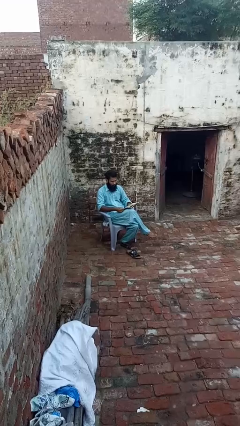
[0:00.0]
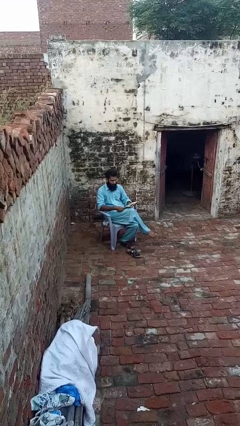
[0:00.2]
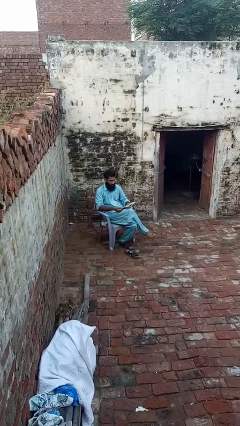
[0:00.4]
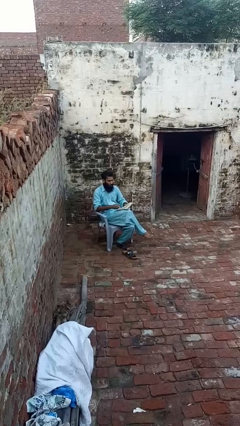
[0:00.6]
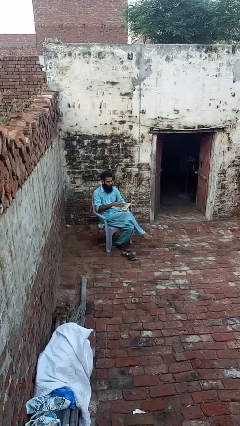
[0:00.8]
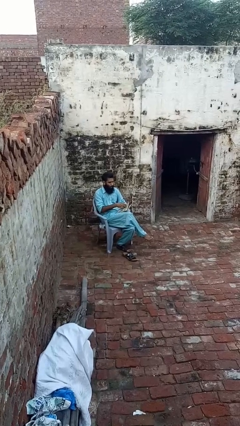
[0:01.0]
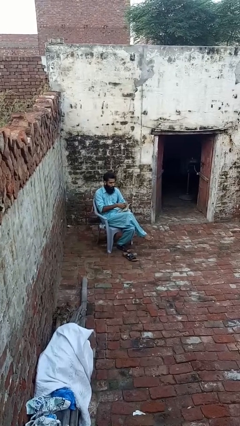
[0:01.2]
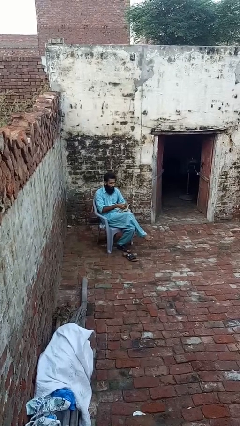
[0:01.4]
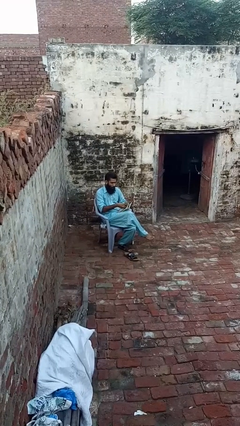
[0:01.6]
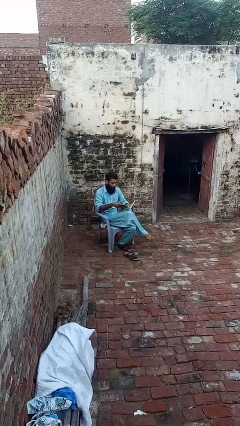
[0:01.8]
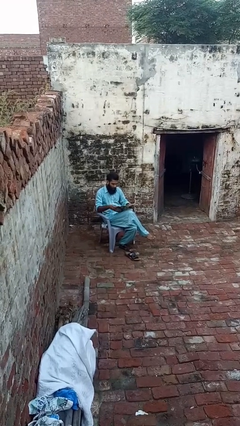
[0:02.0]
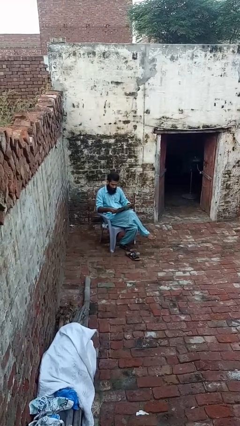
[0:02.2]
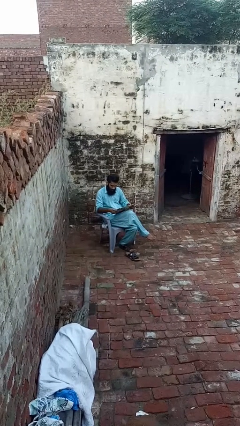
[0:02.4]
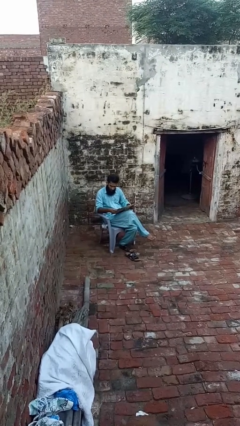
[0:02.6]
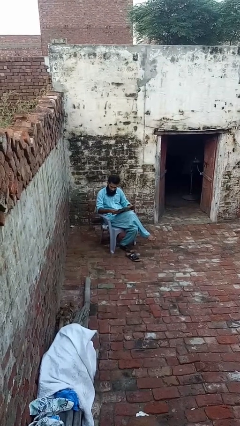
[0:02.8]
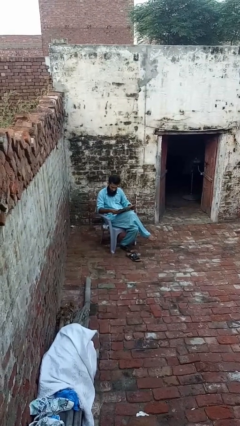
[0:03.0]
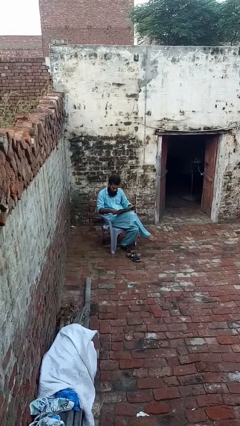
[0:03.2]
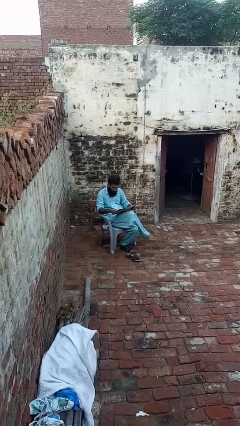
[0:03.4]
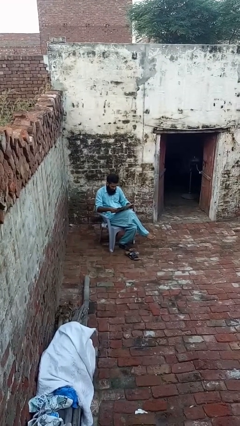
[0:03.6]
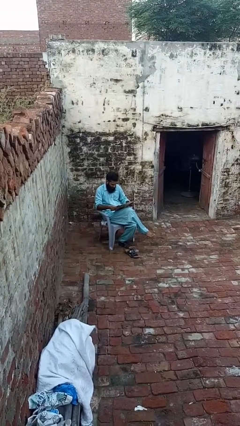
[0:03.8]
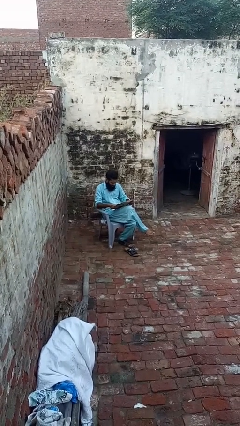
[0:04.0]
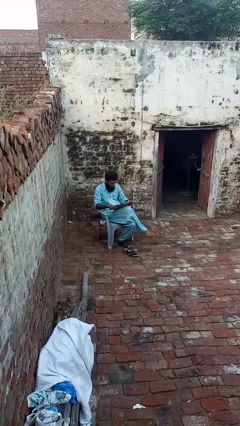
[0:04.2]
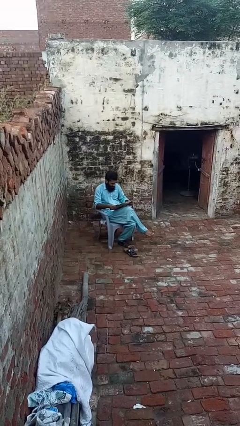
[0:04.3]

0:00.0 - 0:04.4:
person reads magazine

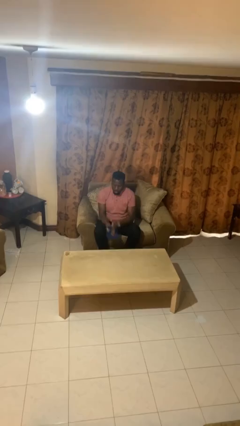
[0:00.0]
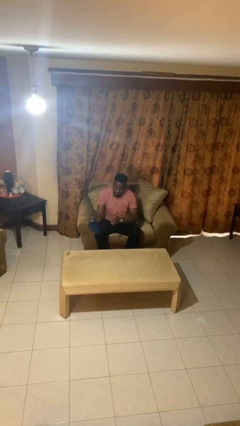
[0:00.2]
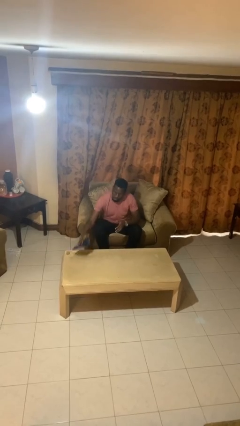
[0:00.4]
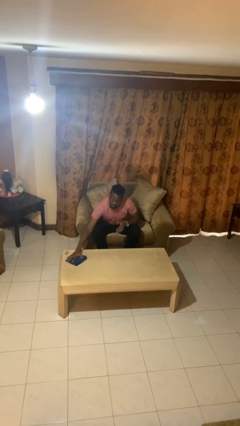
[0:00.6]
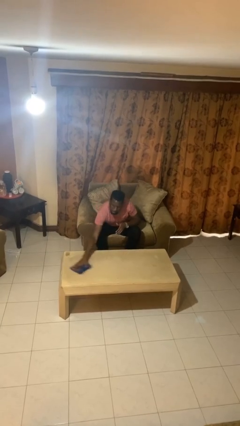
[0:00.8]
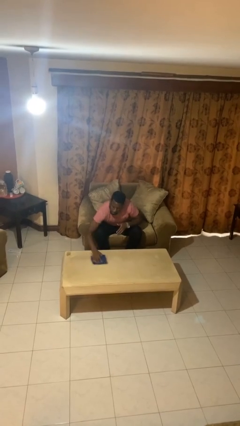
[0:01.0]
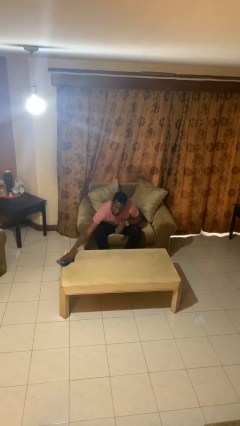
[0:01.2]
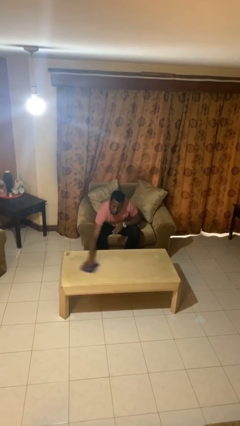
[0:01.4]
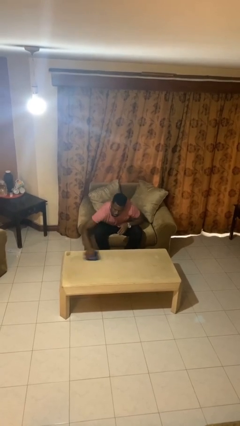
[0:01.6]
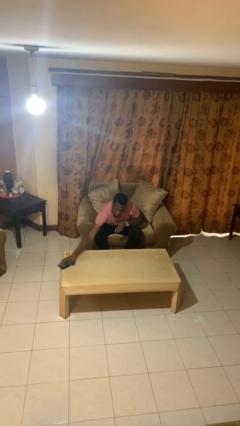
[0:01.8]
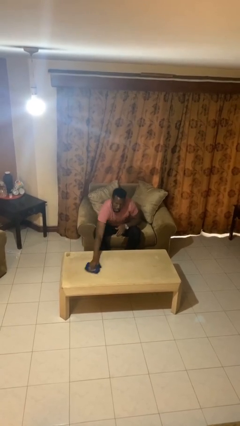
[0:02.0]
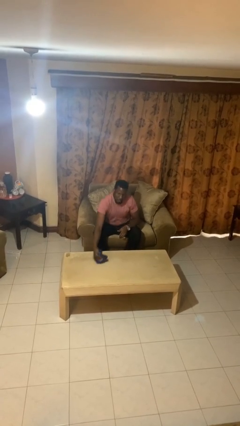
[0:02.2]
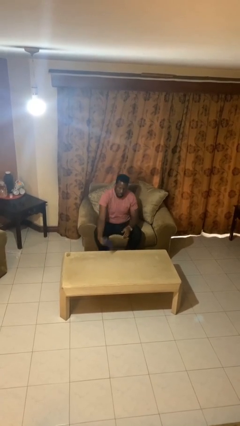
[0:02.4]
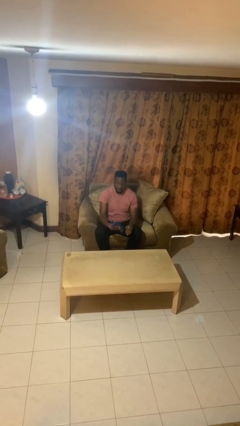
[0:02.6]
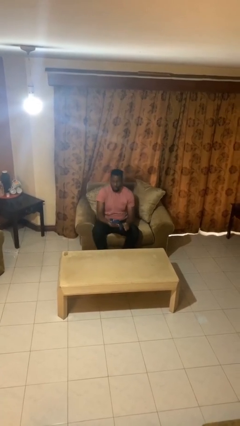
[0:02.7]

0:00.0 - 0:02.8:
person cleans table with rag

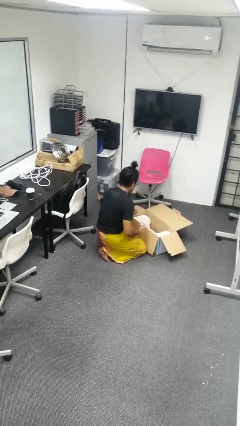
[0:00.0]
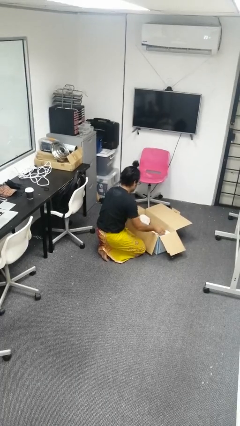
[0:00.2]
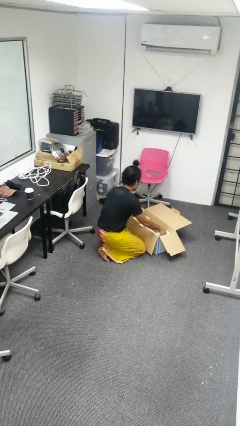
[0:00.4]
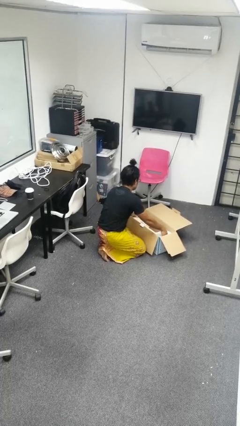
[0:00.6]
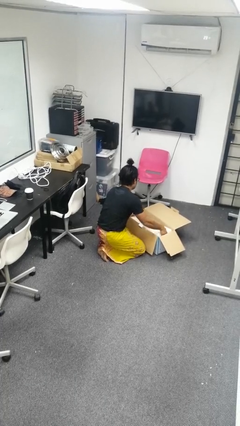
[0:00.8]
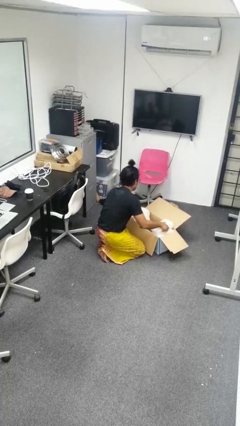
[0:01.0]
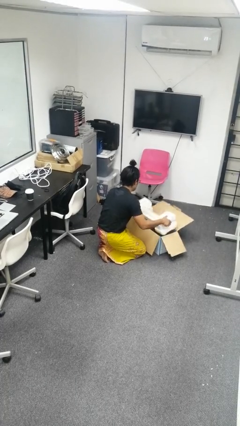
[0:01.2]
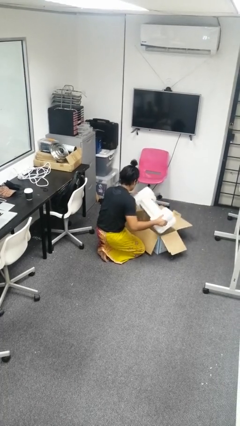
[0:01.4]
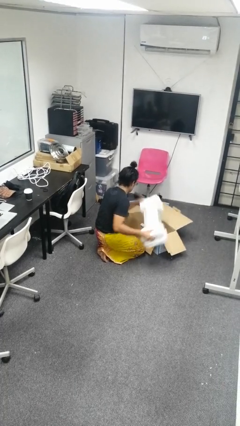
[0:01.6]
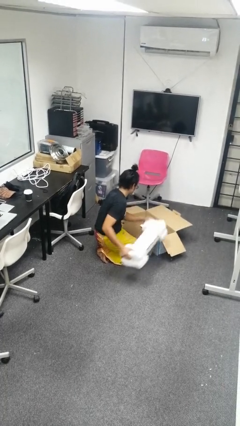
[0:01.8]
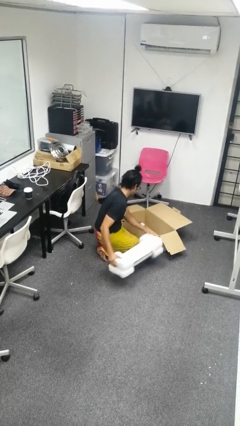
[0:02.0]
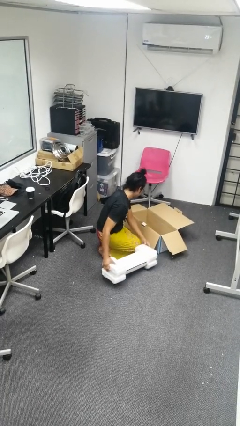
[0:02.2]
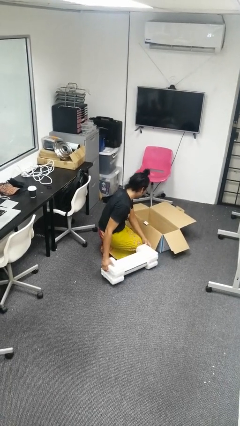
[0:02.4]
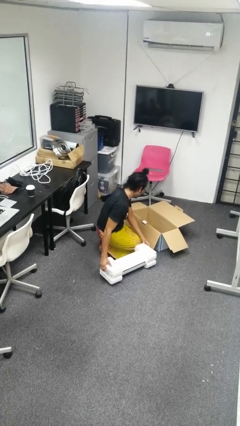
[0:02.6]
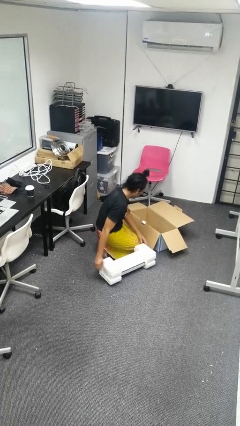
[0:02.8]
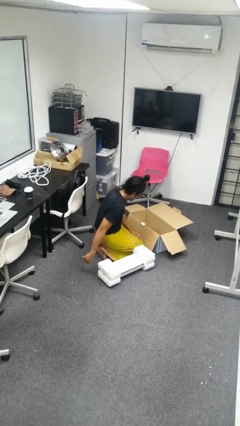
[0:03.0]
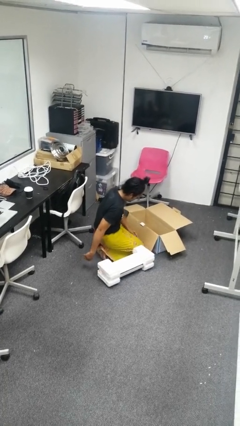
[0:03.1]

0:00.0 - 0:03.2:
person takes object from box

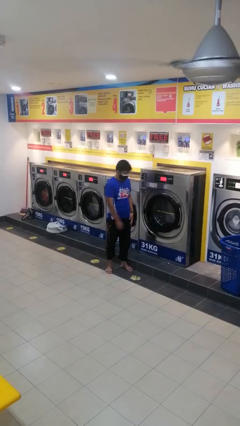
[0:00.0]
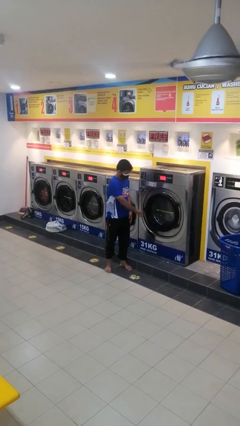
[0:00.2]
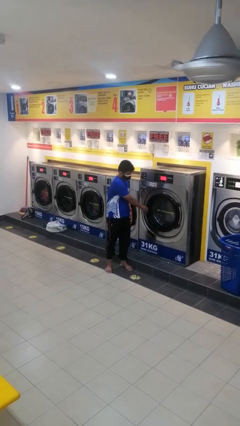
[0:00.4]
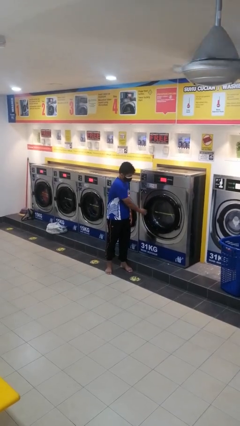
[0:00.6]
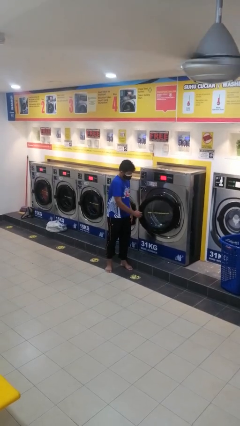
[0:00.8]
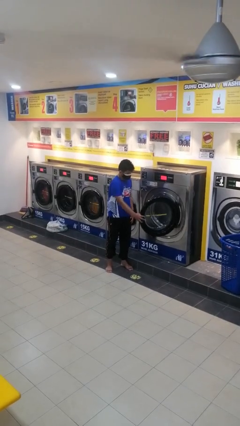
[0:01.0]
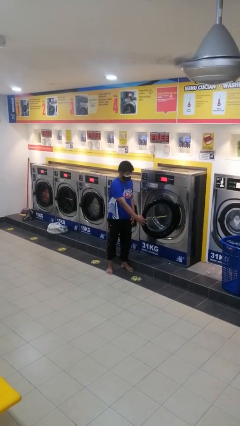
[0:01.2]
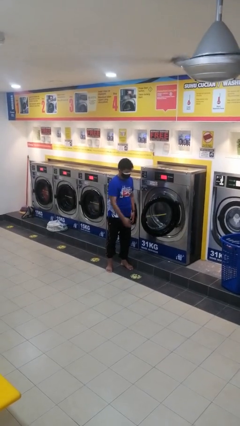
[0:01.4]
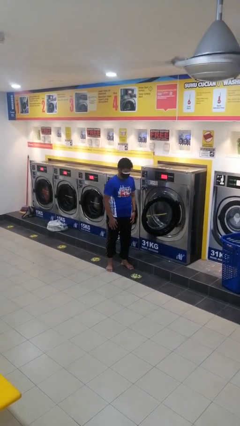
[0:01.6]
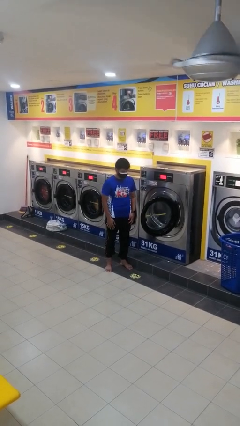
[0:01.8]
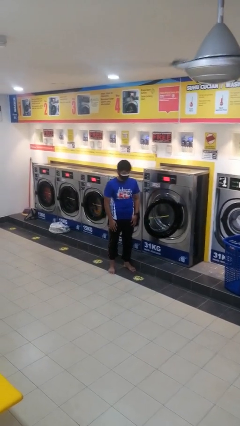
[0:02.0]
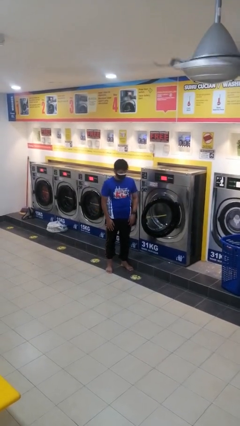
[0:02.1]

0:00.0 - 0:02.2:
person opens clothes washer

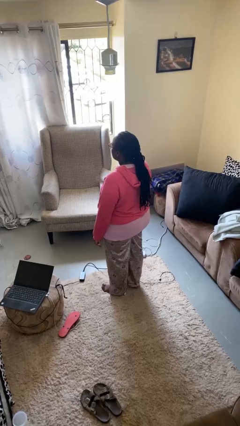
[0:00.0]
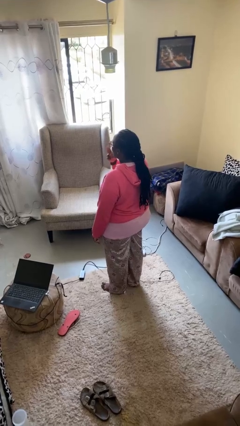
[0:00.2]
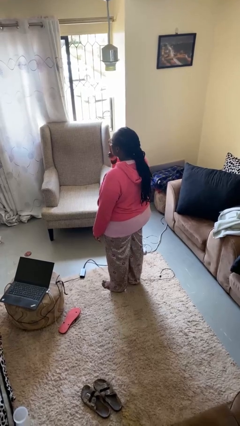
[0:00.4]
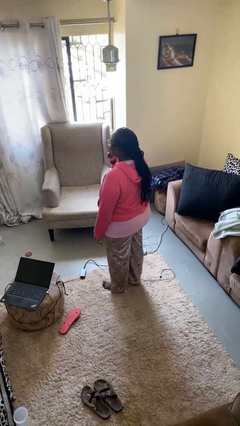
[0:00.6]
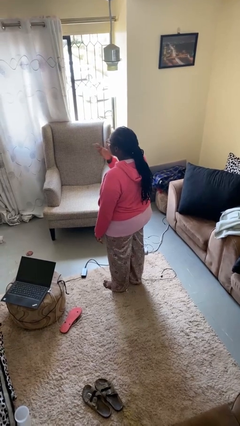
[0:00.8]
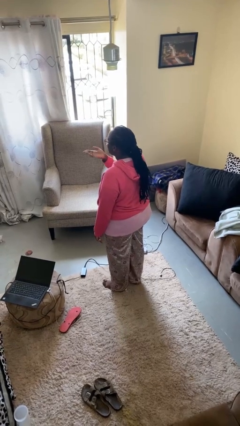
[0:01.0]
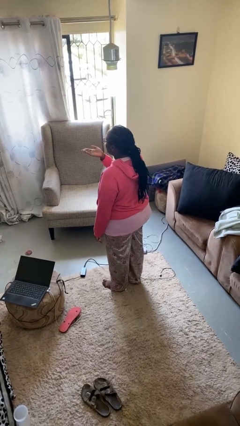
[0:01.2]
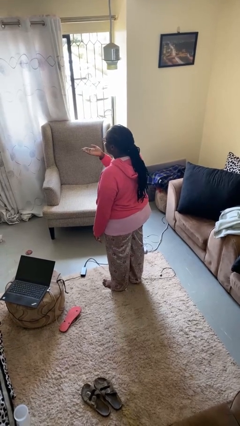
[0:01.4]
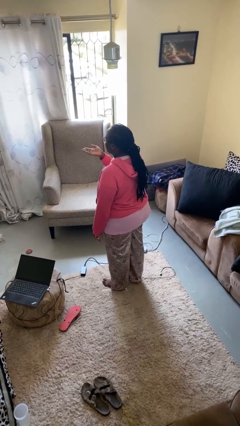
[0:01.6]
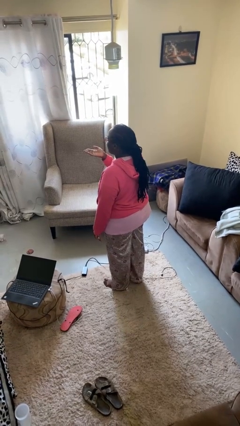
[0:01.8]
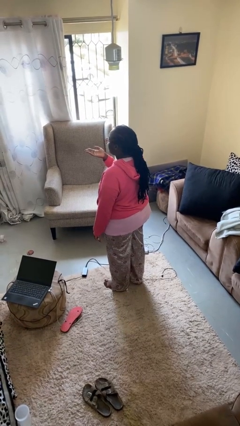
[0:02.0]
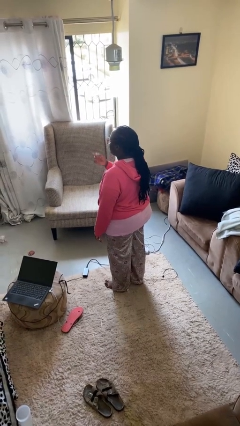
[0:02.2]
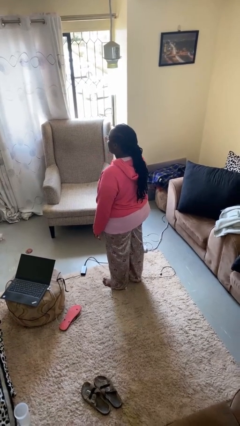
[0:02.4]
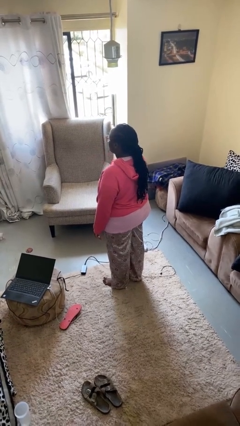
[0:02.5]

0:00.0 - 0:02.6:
person gestures blow kiss

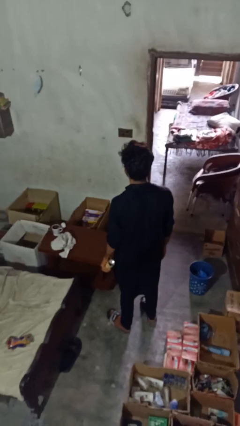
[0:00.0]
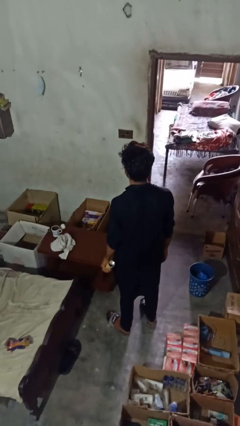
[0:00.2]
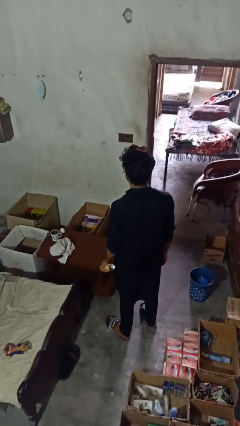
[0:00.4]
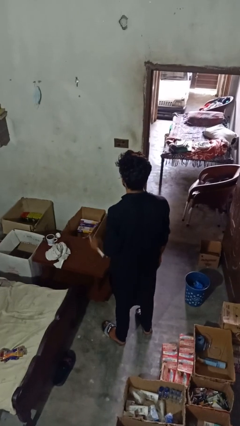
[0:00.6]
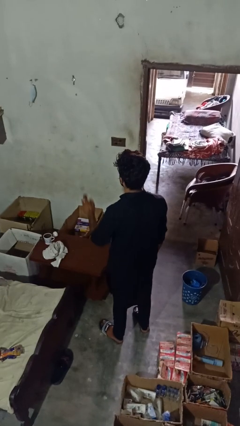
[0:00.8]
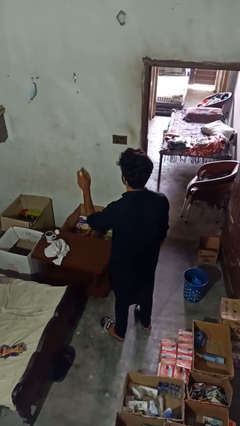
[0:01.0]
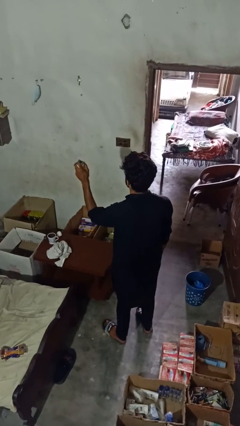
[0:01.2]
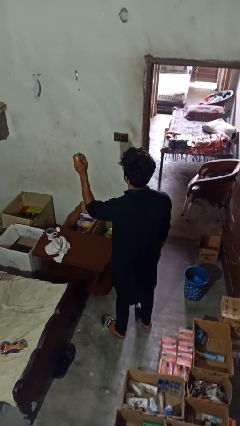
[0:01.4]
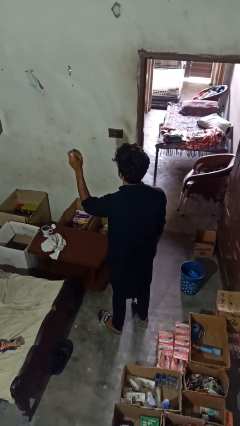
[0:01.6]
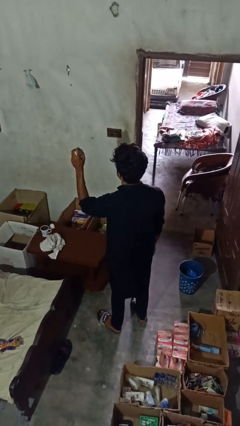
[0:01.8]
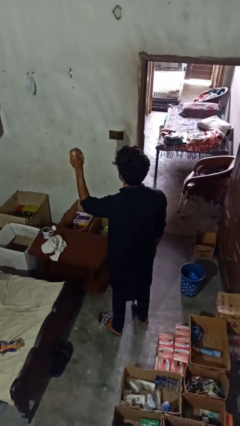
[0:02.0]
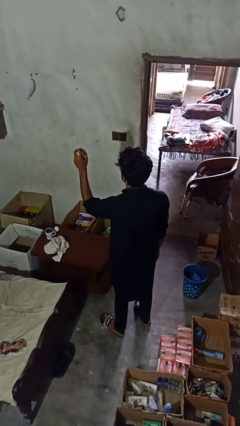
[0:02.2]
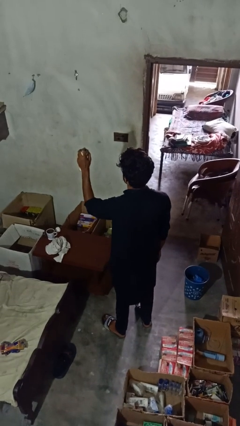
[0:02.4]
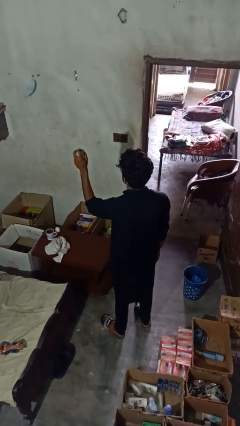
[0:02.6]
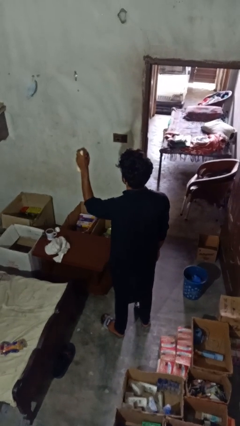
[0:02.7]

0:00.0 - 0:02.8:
person sprays from bottle
